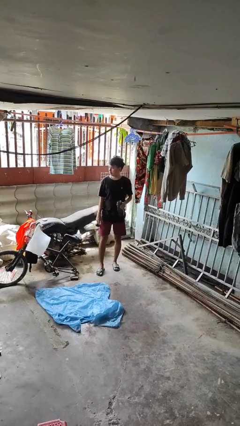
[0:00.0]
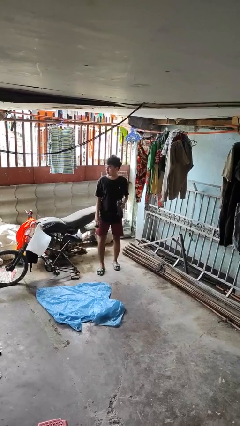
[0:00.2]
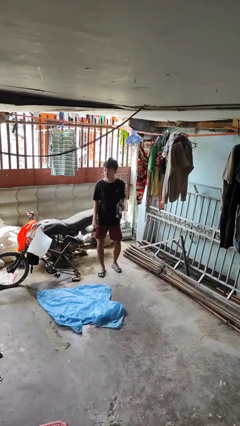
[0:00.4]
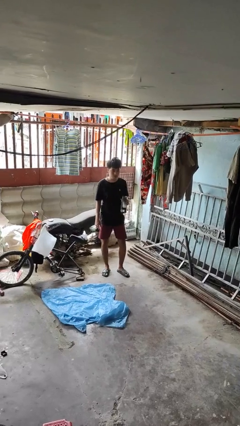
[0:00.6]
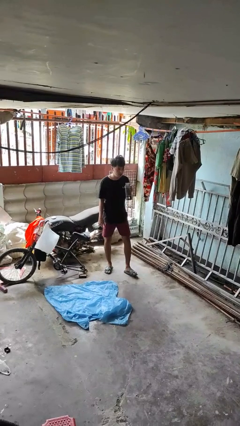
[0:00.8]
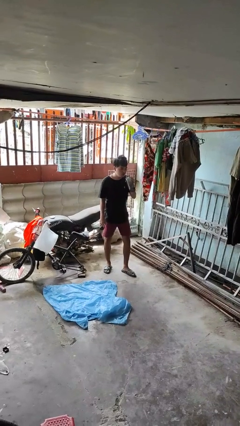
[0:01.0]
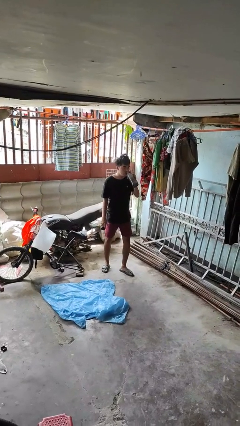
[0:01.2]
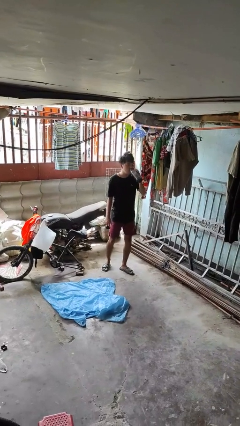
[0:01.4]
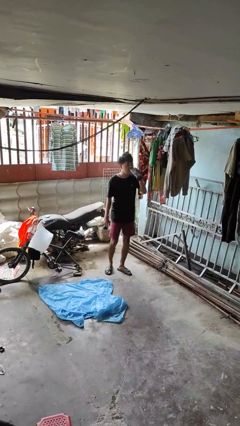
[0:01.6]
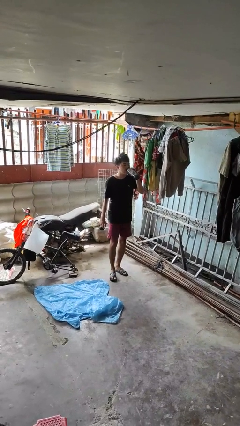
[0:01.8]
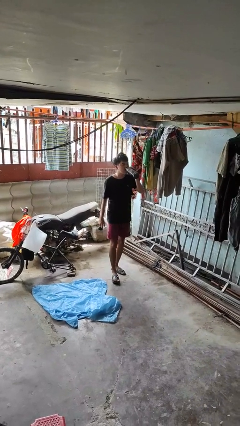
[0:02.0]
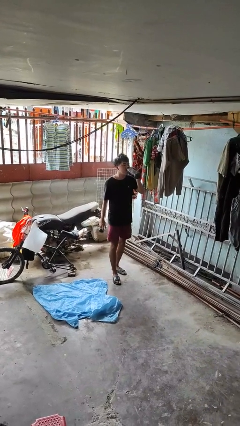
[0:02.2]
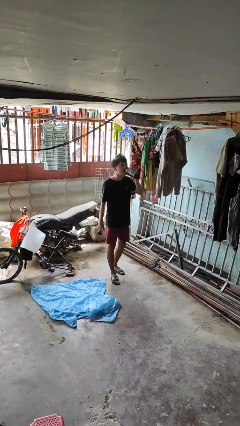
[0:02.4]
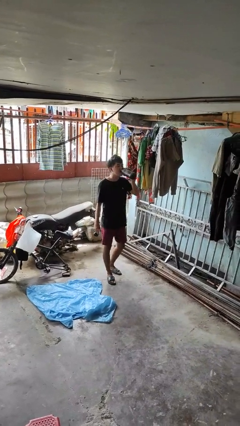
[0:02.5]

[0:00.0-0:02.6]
person drinks from bottle

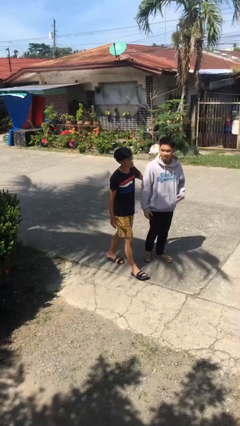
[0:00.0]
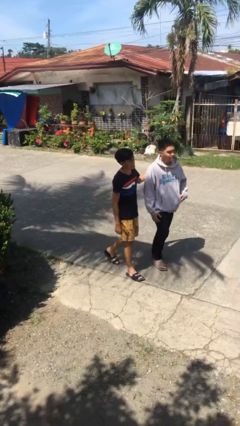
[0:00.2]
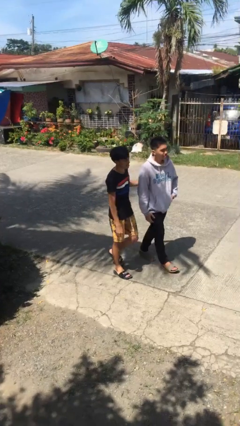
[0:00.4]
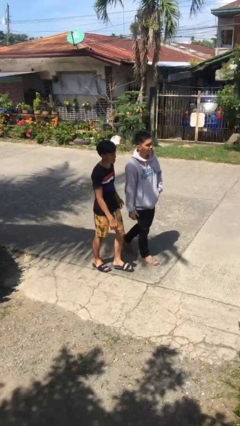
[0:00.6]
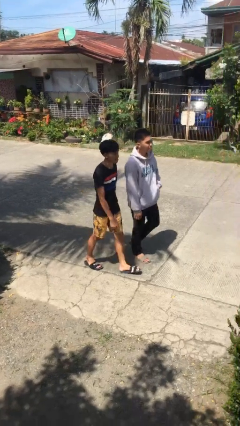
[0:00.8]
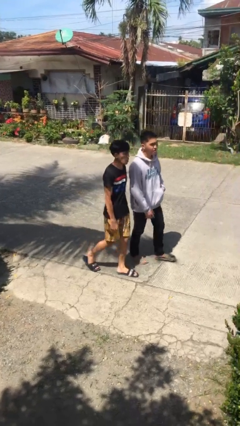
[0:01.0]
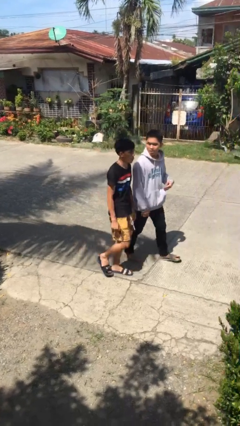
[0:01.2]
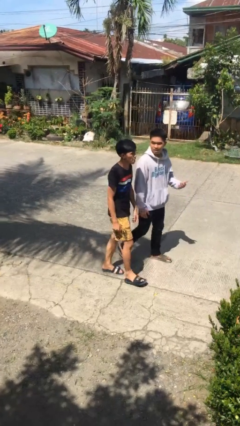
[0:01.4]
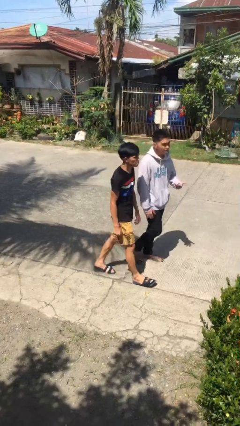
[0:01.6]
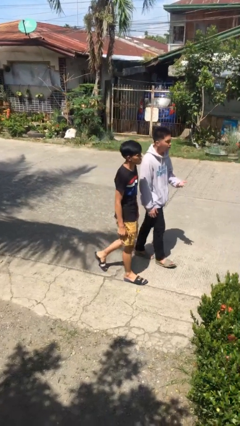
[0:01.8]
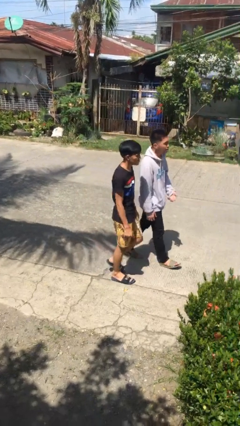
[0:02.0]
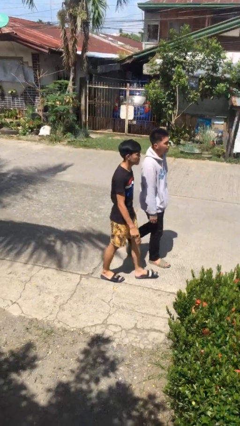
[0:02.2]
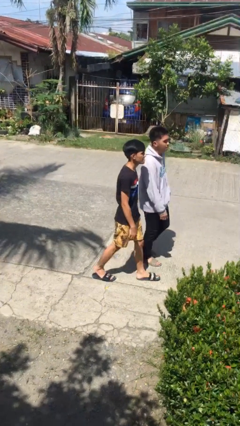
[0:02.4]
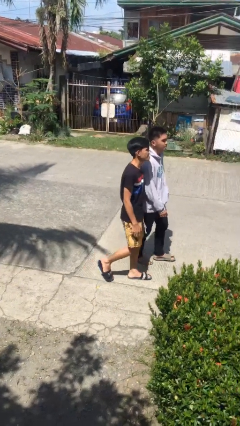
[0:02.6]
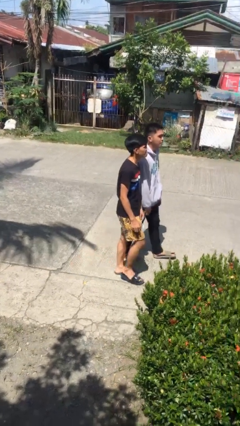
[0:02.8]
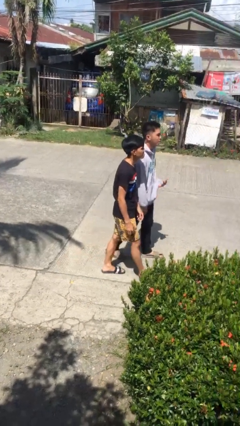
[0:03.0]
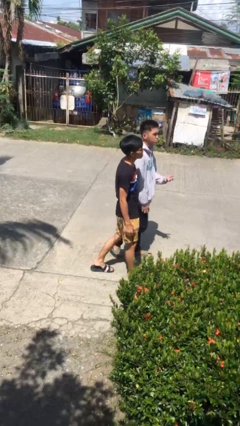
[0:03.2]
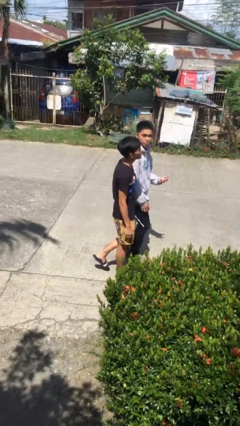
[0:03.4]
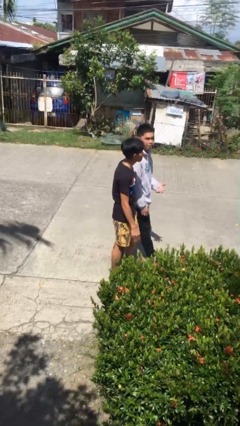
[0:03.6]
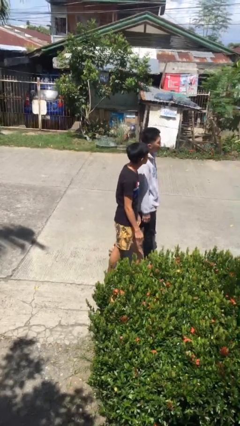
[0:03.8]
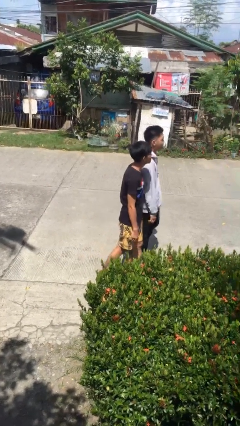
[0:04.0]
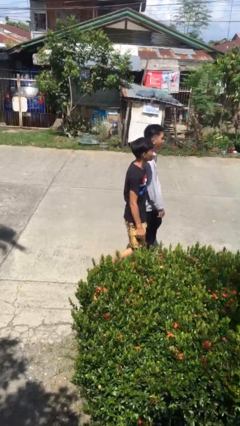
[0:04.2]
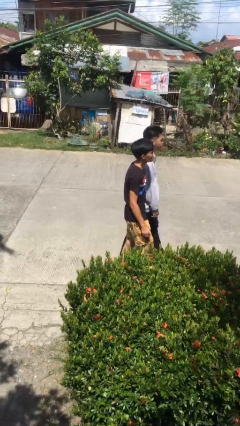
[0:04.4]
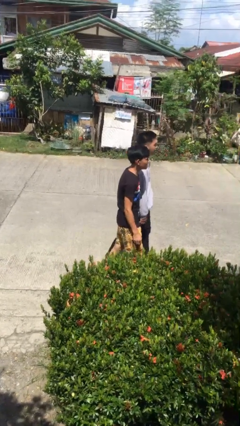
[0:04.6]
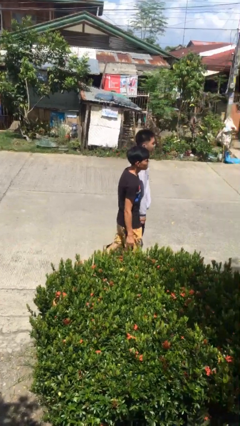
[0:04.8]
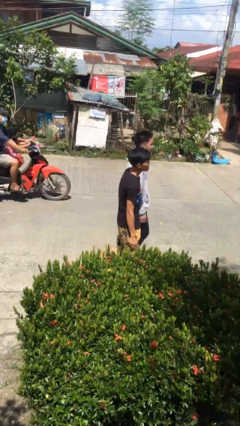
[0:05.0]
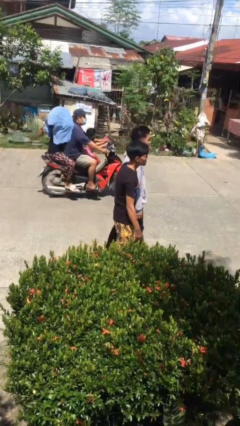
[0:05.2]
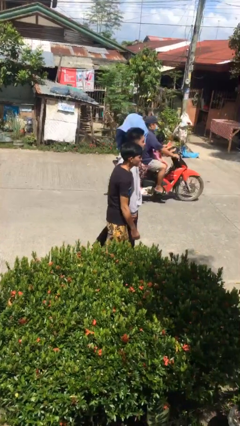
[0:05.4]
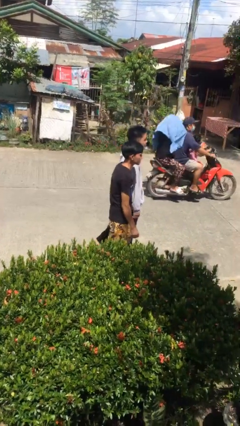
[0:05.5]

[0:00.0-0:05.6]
person talks to person

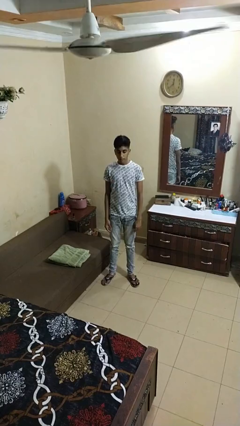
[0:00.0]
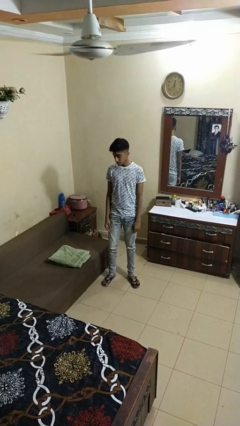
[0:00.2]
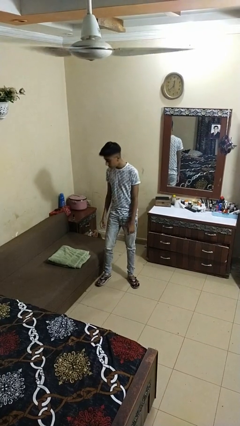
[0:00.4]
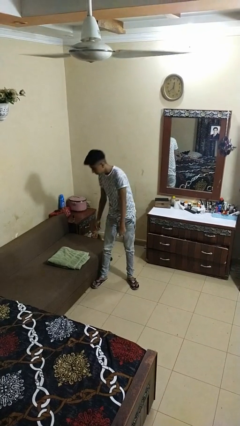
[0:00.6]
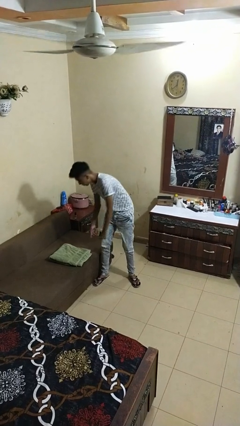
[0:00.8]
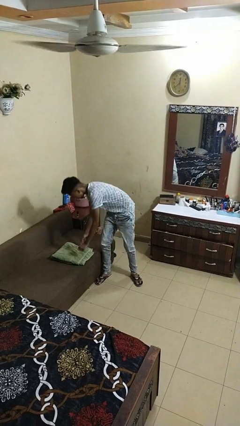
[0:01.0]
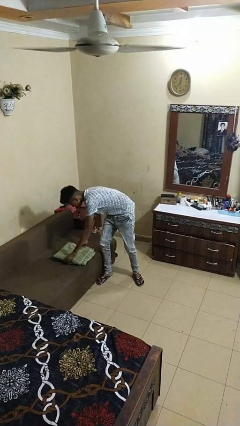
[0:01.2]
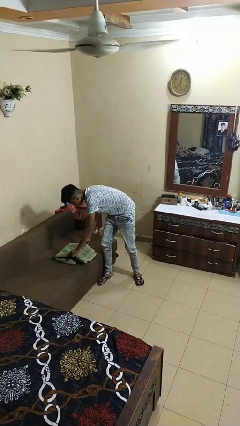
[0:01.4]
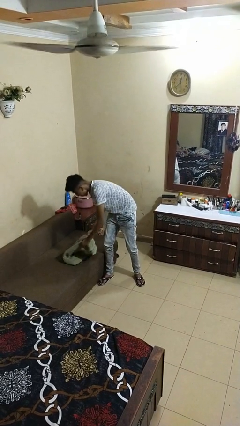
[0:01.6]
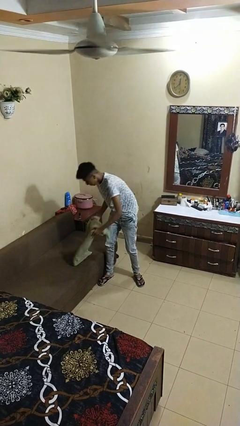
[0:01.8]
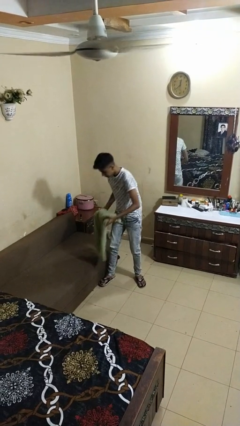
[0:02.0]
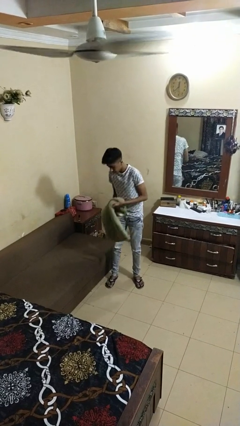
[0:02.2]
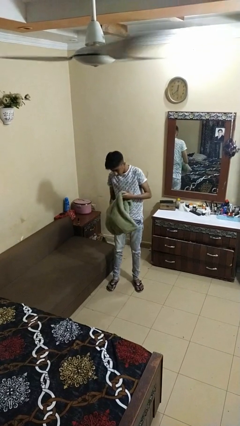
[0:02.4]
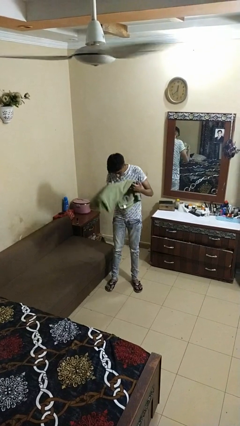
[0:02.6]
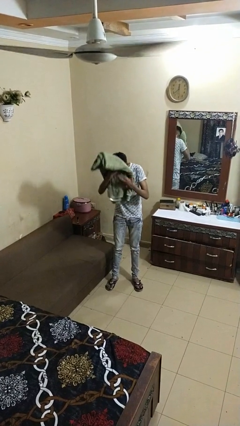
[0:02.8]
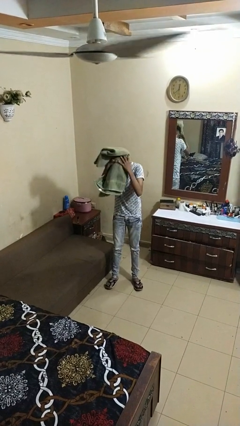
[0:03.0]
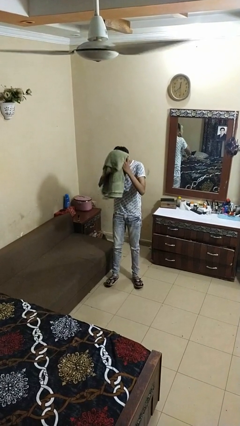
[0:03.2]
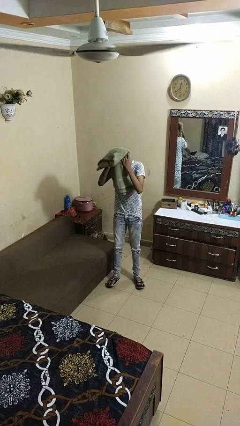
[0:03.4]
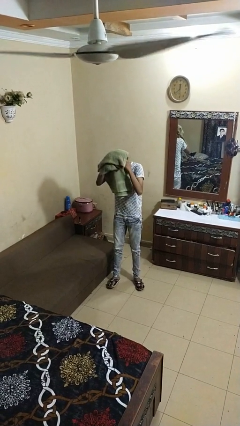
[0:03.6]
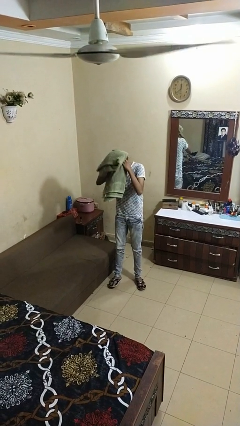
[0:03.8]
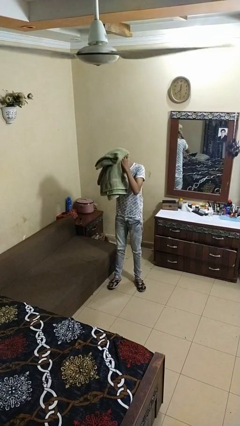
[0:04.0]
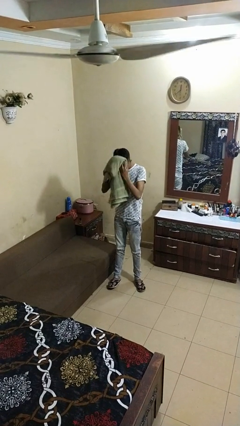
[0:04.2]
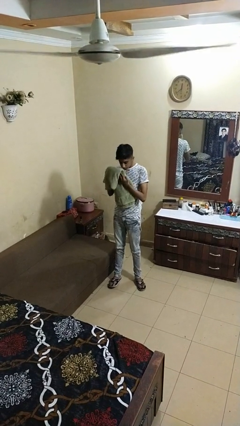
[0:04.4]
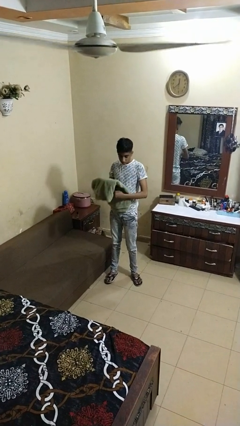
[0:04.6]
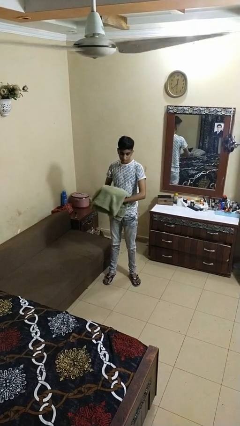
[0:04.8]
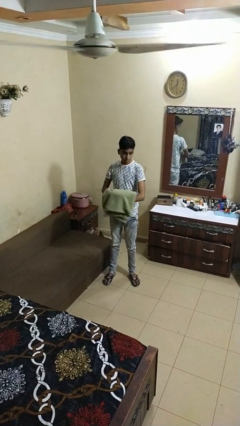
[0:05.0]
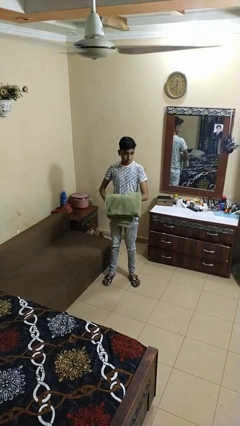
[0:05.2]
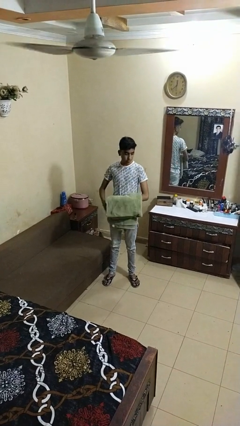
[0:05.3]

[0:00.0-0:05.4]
person dries hair with towel

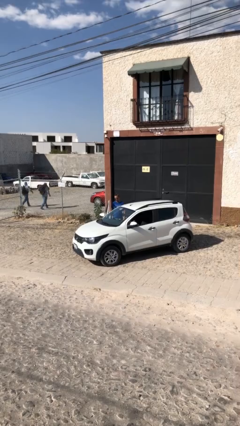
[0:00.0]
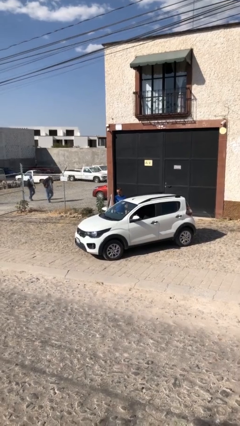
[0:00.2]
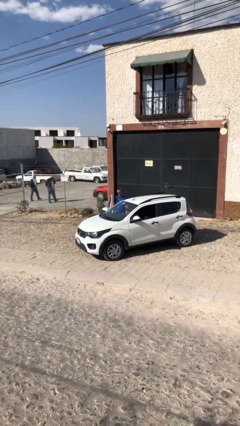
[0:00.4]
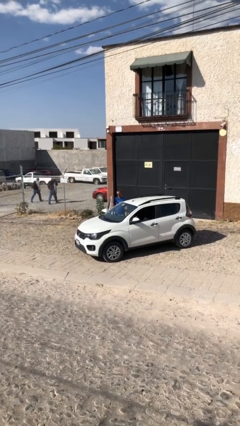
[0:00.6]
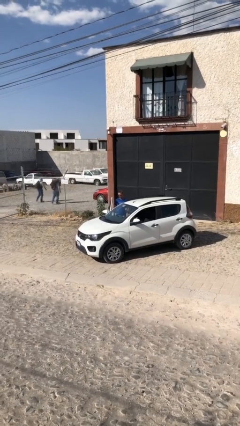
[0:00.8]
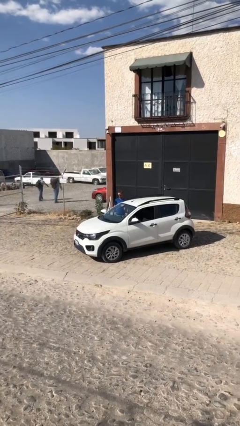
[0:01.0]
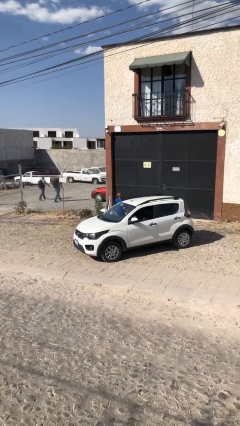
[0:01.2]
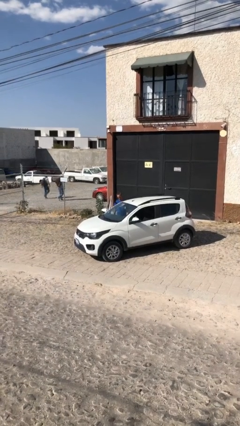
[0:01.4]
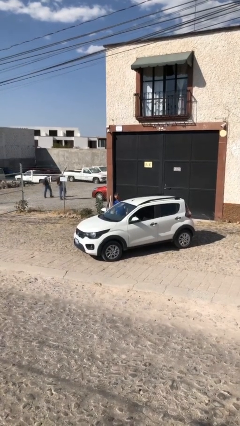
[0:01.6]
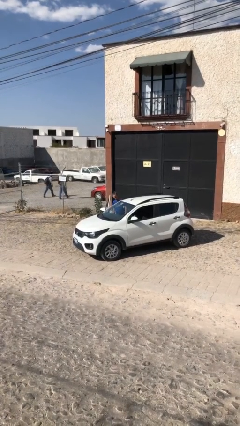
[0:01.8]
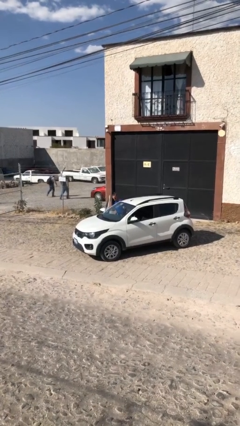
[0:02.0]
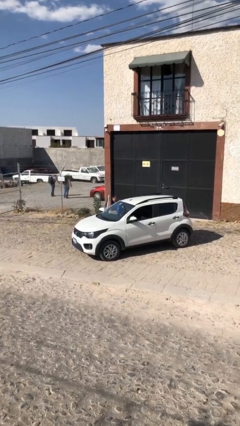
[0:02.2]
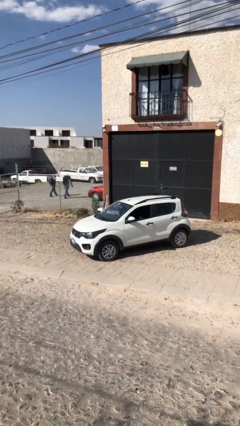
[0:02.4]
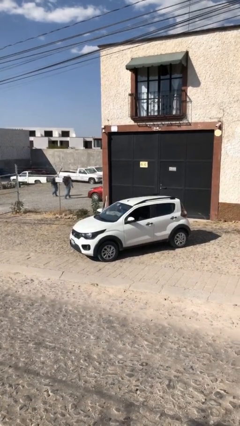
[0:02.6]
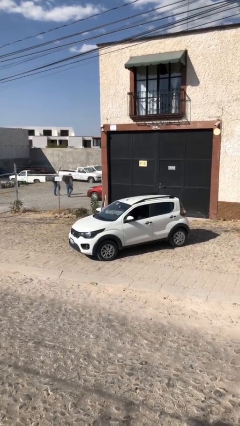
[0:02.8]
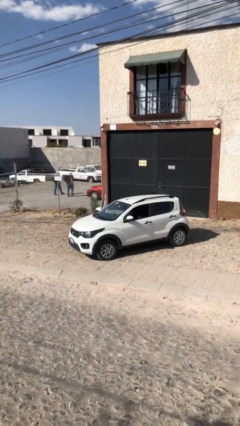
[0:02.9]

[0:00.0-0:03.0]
person enters car

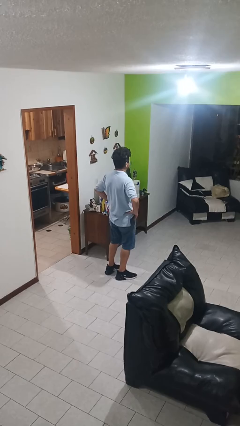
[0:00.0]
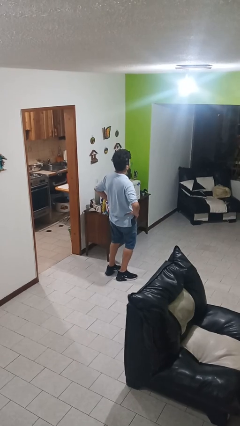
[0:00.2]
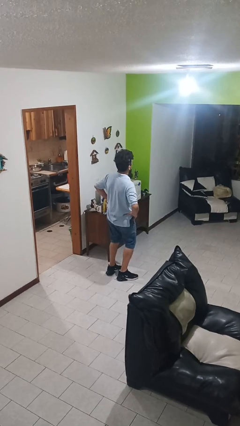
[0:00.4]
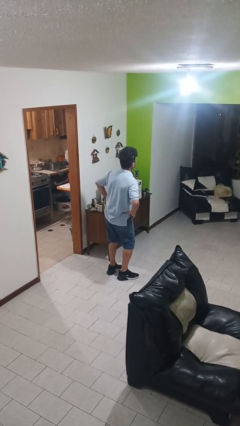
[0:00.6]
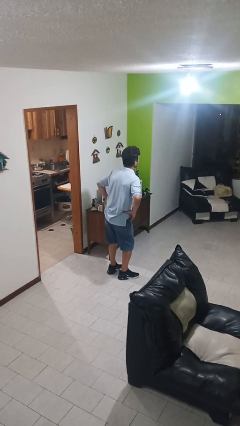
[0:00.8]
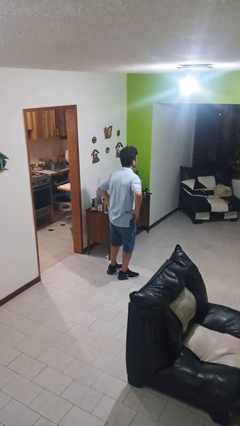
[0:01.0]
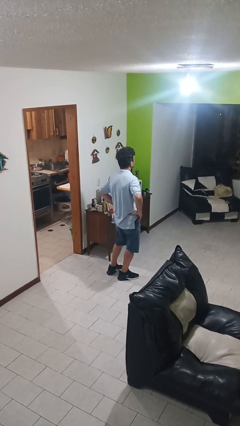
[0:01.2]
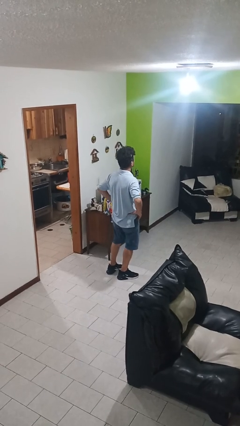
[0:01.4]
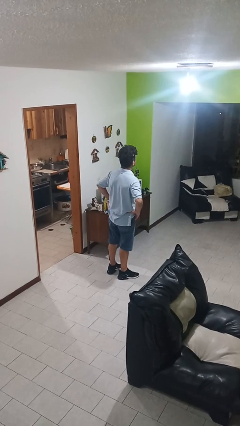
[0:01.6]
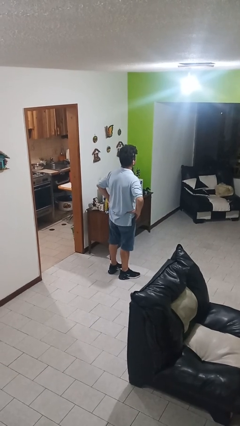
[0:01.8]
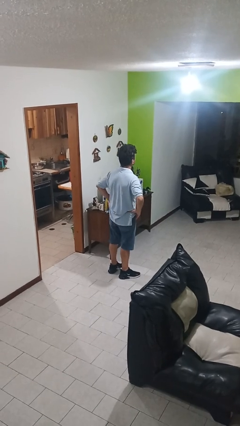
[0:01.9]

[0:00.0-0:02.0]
person wiggles hips
